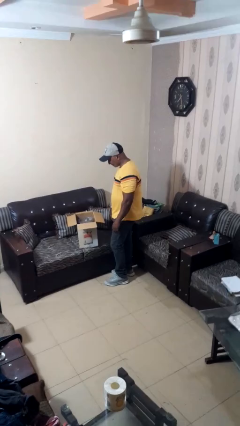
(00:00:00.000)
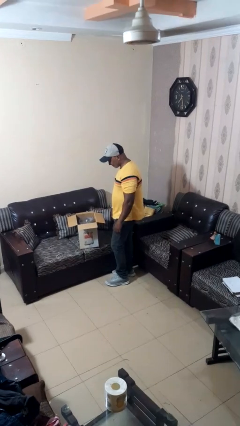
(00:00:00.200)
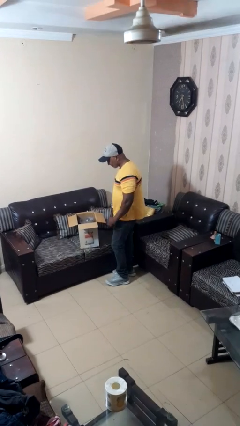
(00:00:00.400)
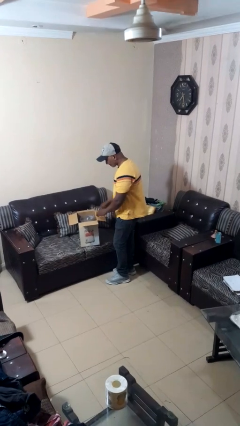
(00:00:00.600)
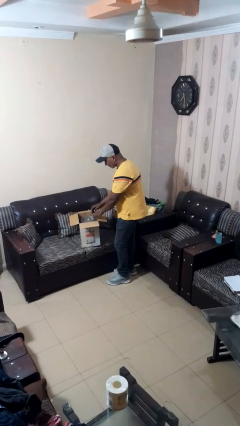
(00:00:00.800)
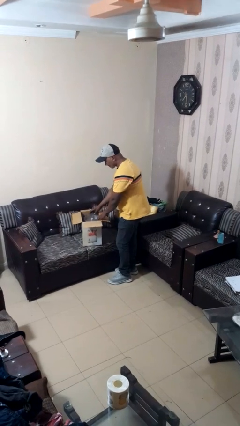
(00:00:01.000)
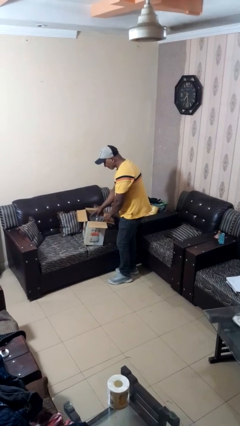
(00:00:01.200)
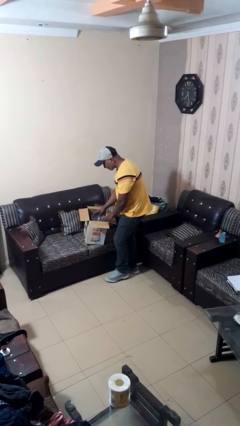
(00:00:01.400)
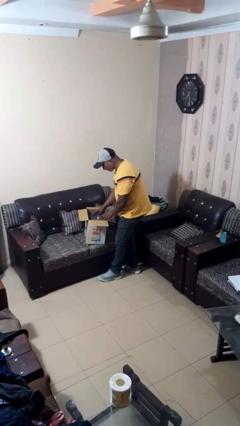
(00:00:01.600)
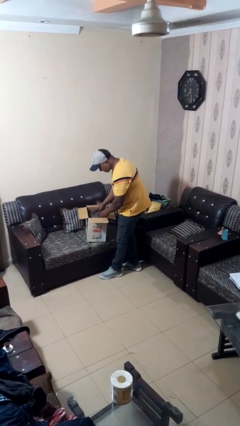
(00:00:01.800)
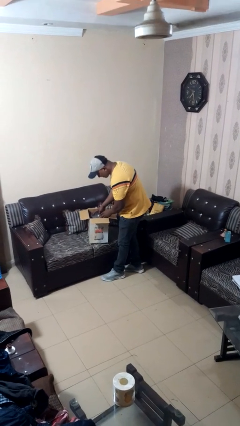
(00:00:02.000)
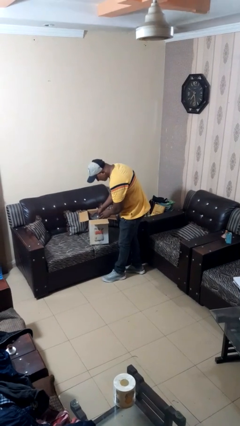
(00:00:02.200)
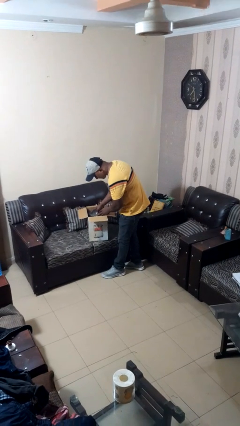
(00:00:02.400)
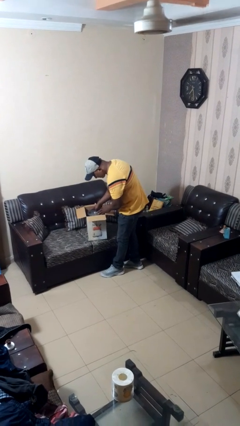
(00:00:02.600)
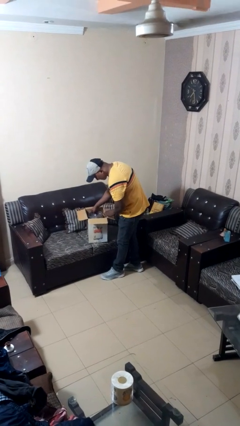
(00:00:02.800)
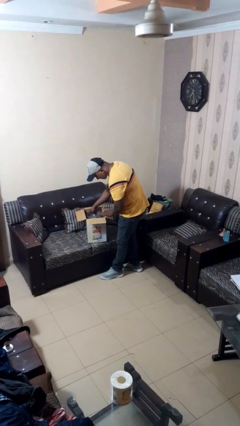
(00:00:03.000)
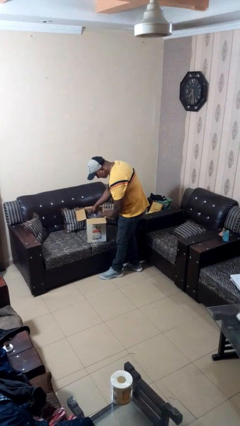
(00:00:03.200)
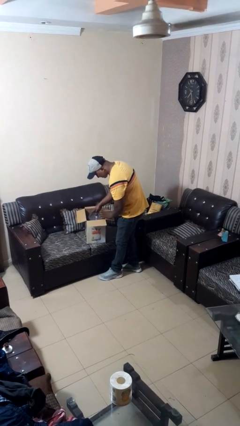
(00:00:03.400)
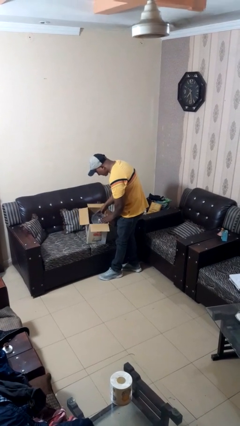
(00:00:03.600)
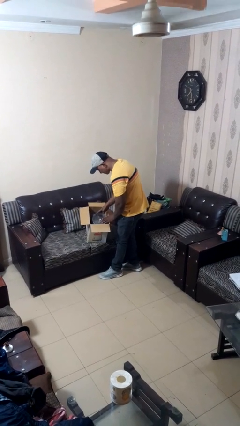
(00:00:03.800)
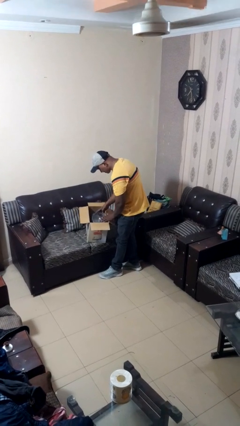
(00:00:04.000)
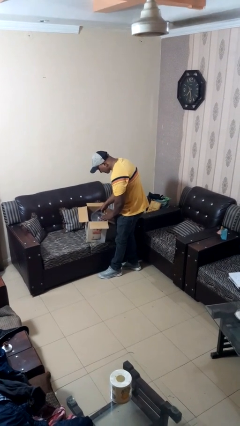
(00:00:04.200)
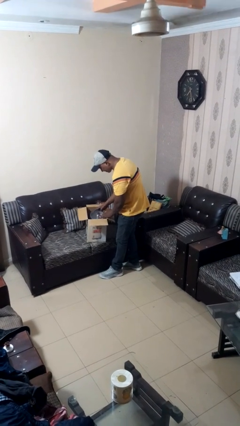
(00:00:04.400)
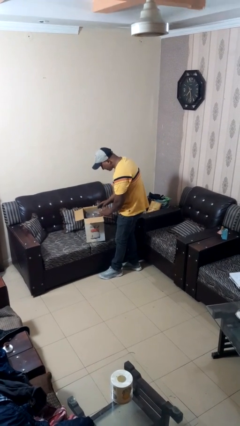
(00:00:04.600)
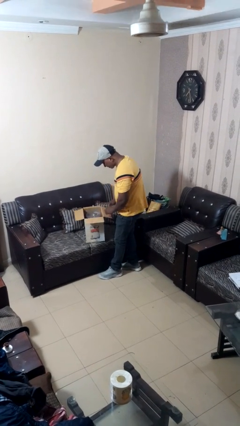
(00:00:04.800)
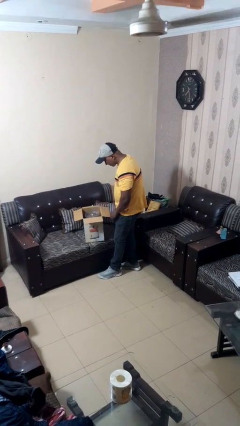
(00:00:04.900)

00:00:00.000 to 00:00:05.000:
person searches in box

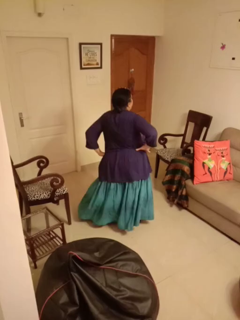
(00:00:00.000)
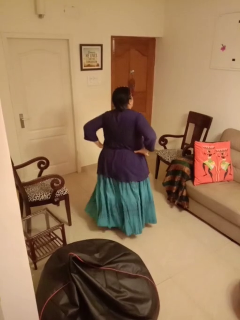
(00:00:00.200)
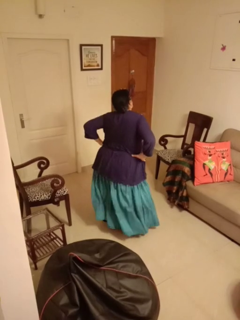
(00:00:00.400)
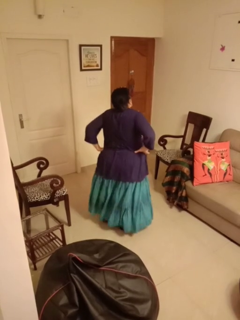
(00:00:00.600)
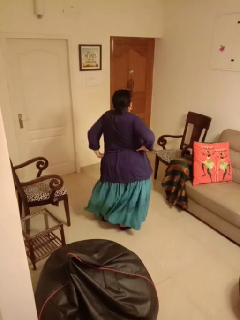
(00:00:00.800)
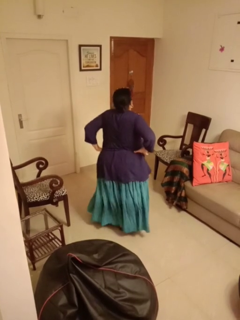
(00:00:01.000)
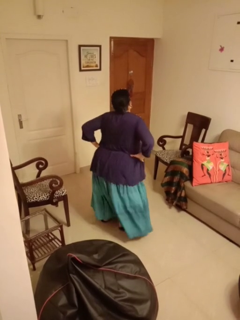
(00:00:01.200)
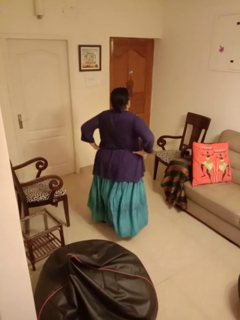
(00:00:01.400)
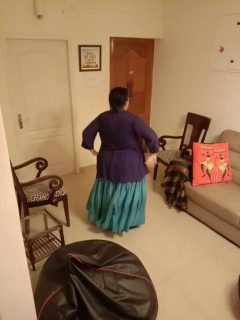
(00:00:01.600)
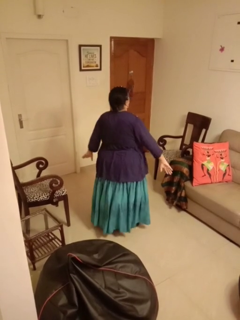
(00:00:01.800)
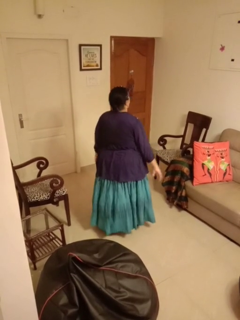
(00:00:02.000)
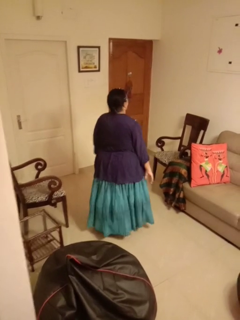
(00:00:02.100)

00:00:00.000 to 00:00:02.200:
person wiggles hips

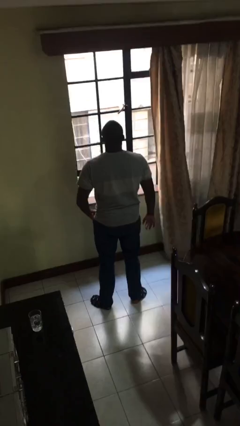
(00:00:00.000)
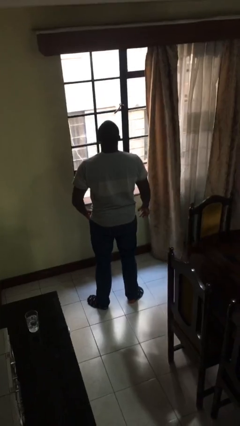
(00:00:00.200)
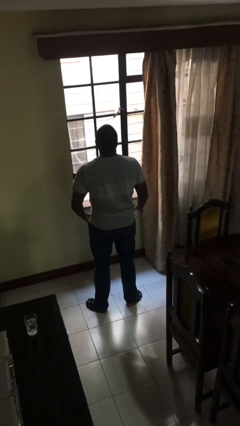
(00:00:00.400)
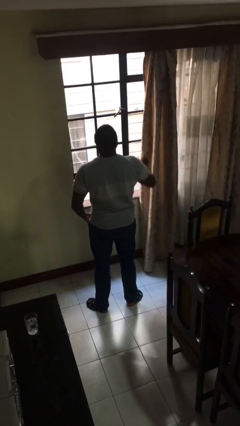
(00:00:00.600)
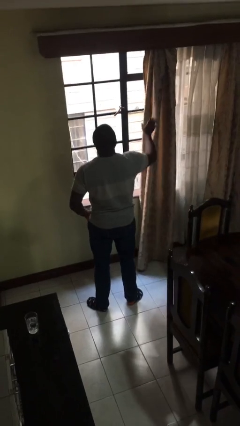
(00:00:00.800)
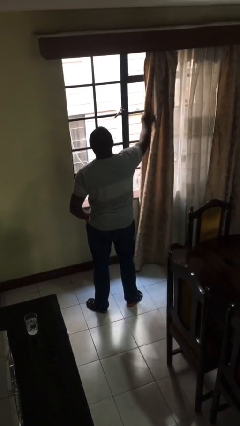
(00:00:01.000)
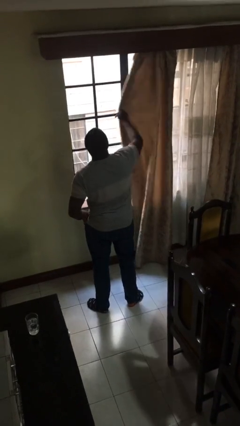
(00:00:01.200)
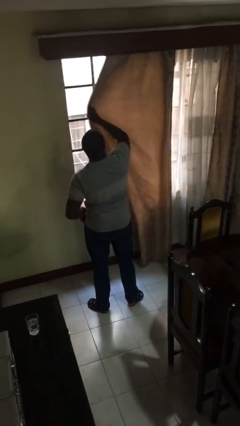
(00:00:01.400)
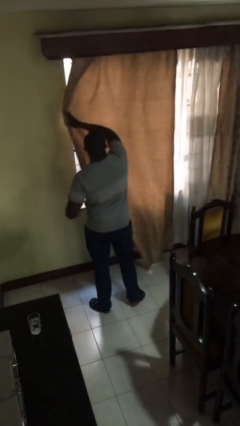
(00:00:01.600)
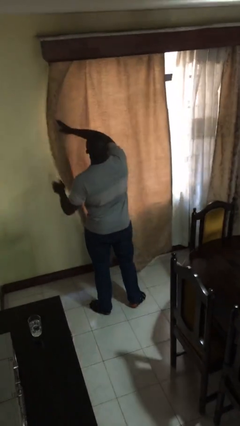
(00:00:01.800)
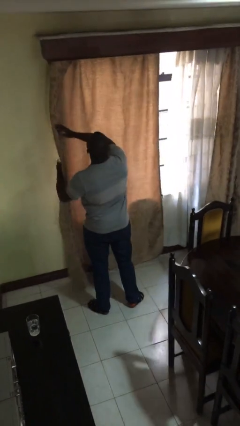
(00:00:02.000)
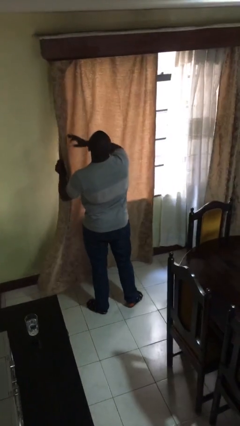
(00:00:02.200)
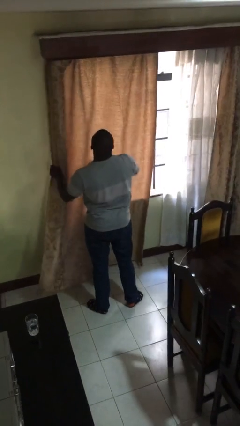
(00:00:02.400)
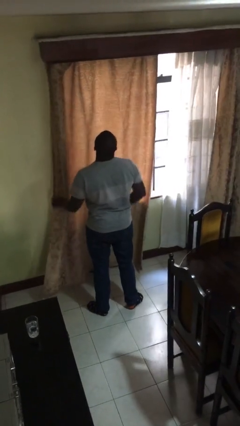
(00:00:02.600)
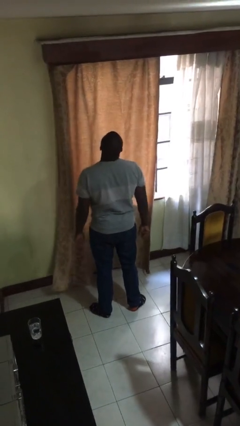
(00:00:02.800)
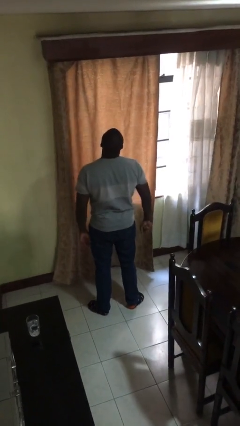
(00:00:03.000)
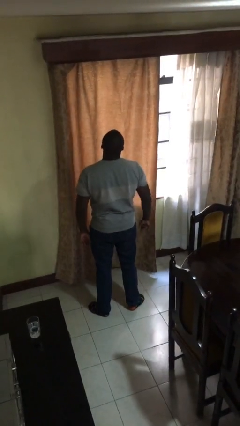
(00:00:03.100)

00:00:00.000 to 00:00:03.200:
person closes curtains

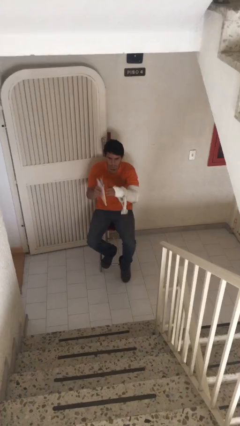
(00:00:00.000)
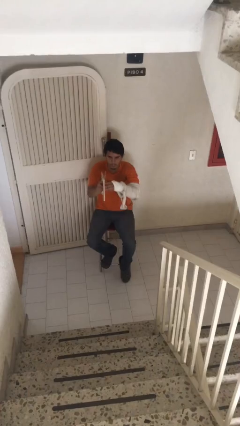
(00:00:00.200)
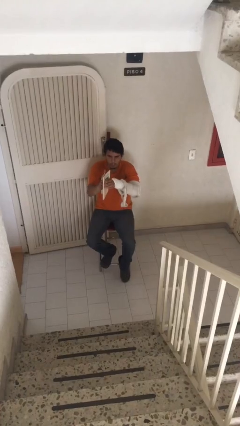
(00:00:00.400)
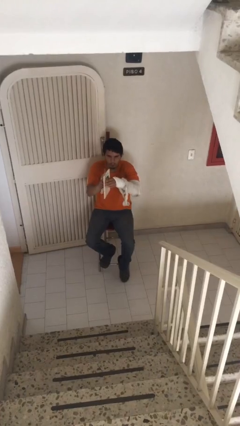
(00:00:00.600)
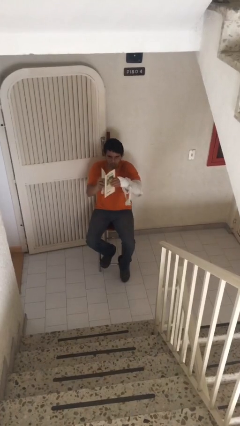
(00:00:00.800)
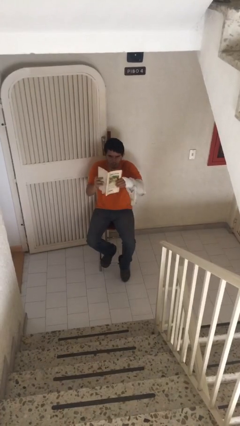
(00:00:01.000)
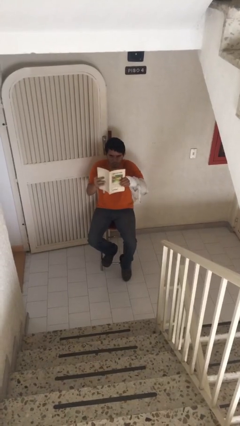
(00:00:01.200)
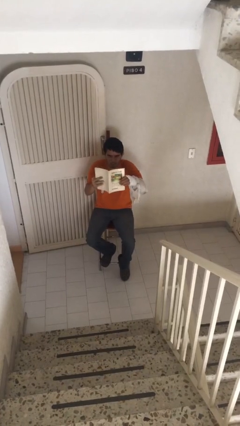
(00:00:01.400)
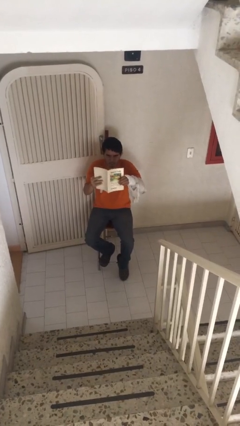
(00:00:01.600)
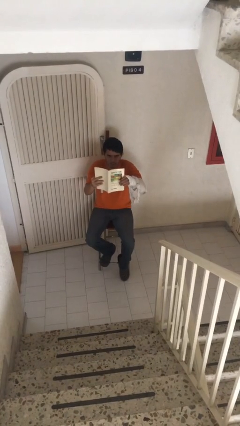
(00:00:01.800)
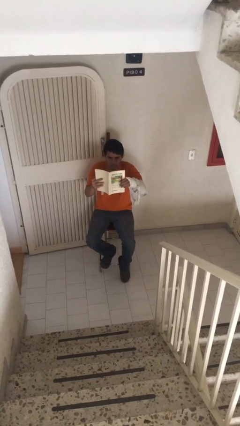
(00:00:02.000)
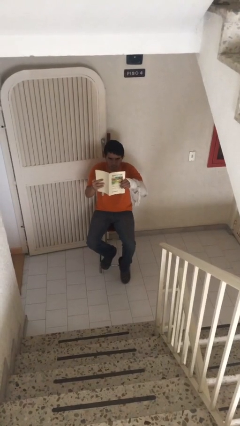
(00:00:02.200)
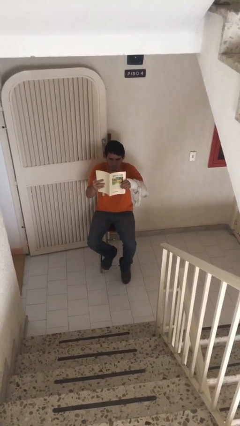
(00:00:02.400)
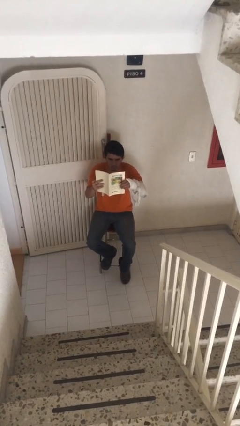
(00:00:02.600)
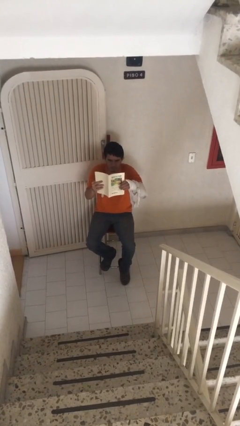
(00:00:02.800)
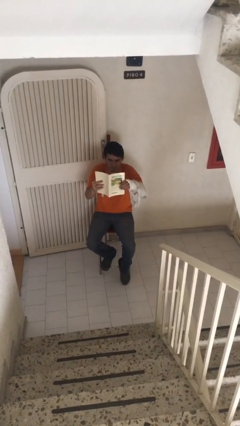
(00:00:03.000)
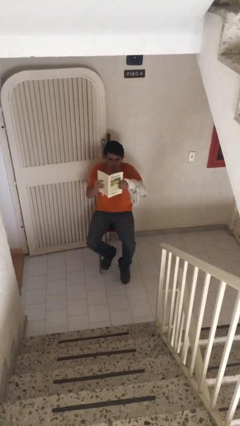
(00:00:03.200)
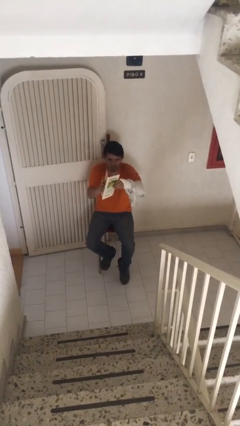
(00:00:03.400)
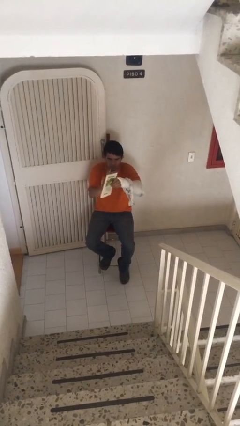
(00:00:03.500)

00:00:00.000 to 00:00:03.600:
person reads document

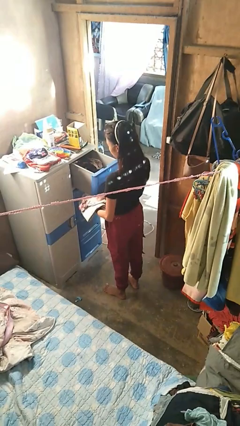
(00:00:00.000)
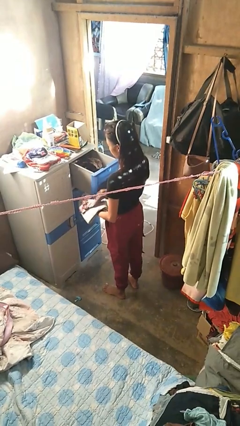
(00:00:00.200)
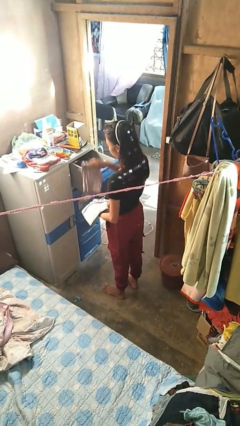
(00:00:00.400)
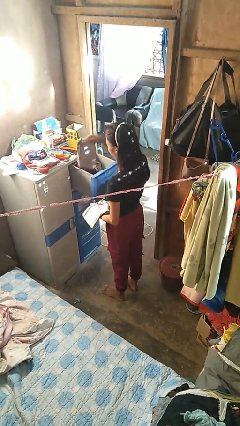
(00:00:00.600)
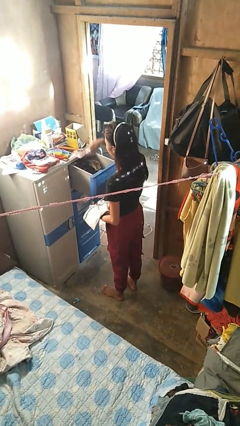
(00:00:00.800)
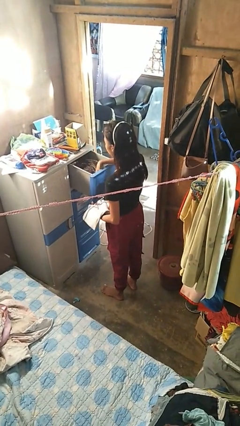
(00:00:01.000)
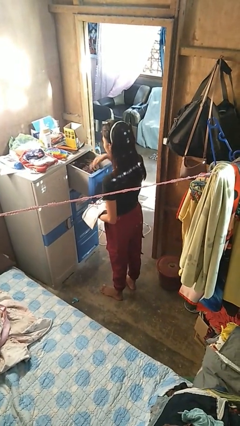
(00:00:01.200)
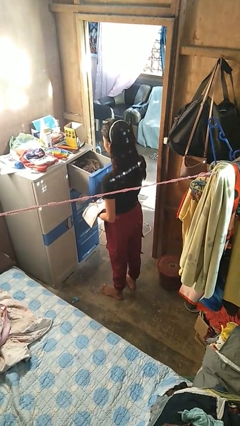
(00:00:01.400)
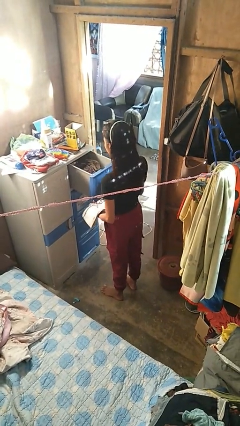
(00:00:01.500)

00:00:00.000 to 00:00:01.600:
person puts clothes into dresser

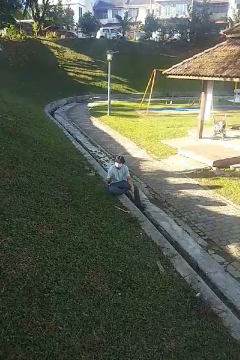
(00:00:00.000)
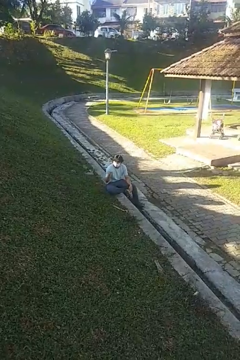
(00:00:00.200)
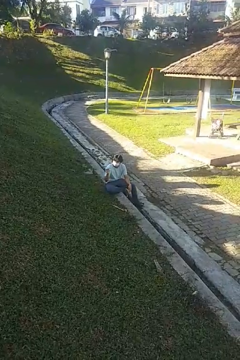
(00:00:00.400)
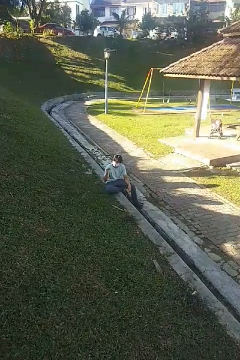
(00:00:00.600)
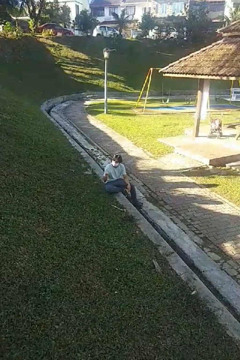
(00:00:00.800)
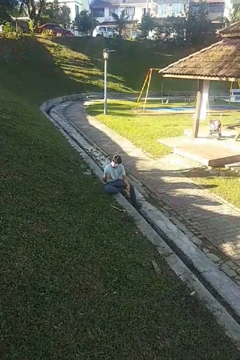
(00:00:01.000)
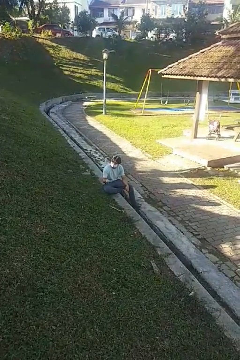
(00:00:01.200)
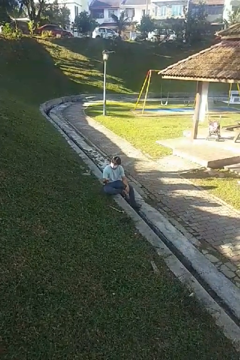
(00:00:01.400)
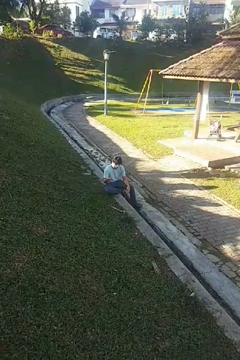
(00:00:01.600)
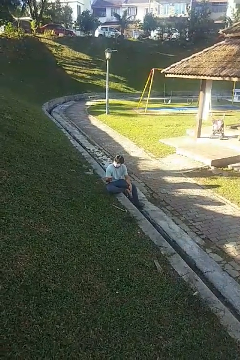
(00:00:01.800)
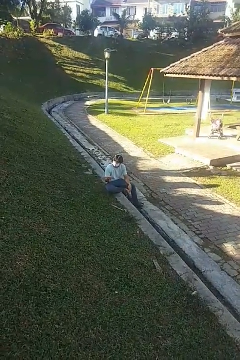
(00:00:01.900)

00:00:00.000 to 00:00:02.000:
person snaps fingers

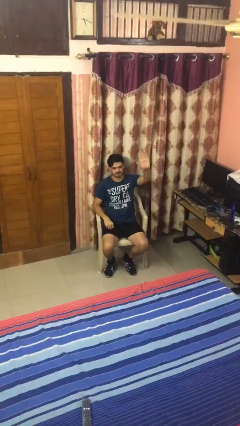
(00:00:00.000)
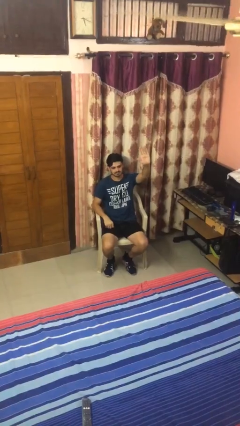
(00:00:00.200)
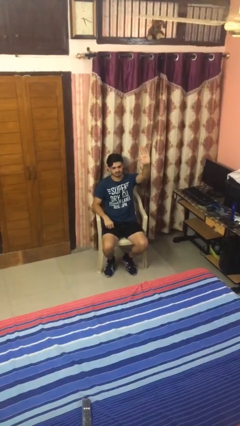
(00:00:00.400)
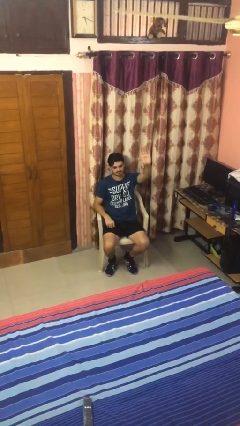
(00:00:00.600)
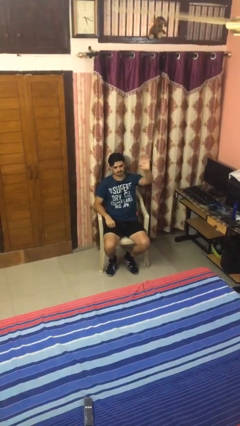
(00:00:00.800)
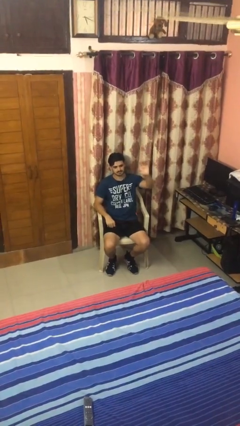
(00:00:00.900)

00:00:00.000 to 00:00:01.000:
person gestures lower hand
